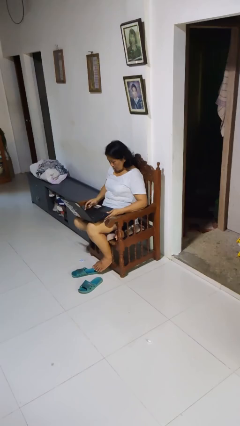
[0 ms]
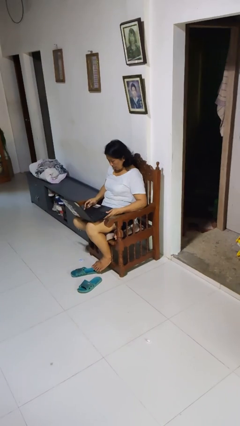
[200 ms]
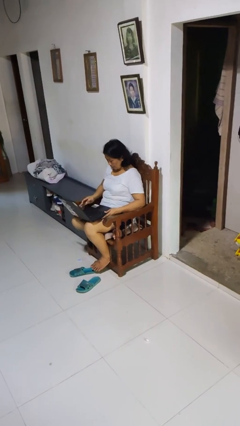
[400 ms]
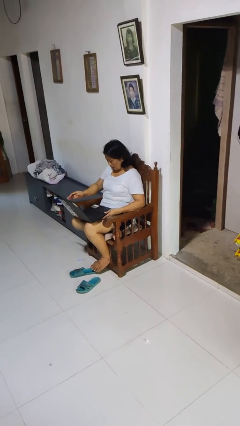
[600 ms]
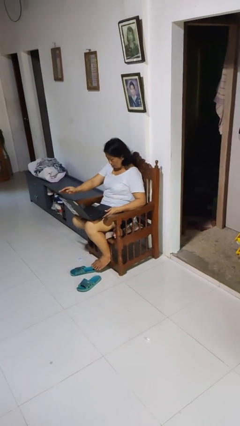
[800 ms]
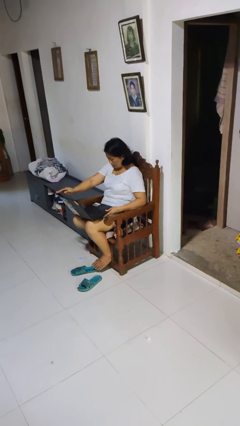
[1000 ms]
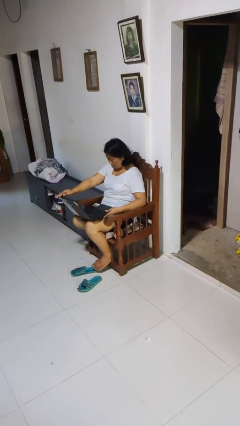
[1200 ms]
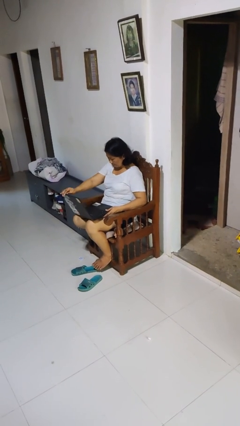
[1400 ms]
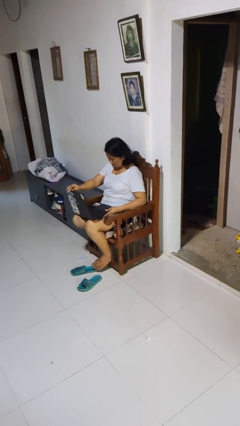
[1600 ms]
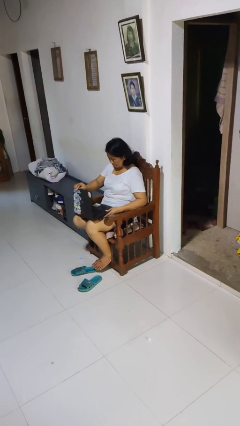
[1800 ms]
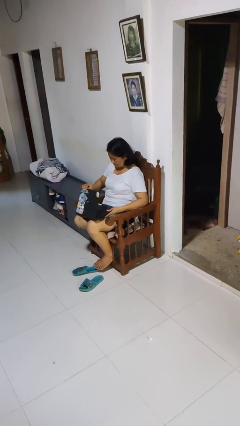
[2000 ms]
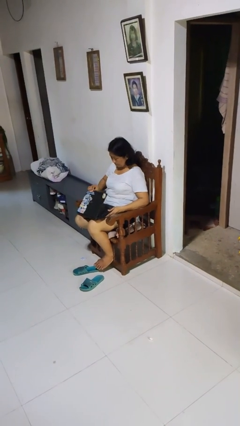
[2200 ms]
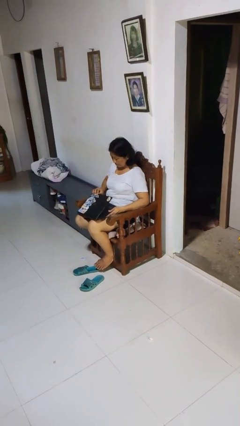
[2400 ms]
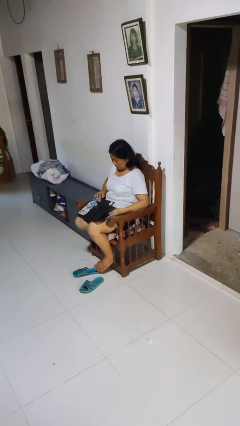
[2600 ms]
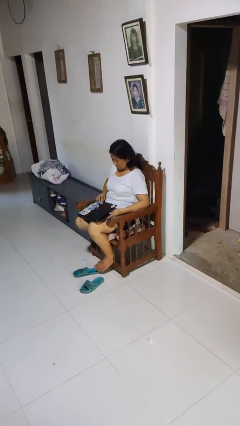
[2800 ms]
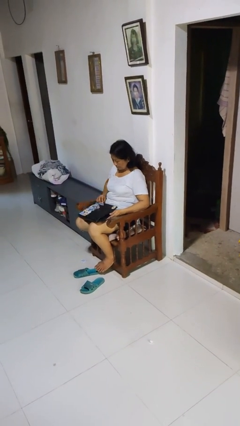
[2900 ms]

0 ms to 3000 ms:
person closes laptop

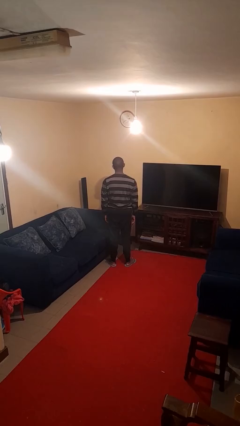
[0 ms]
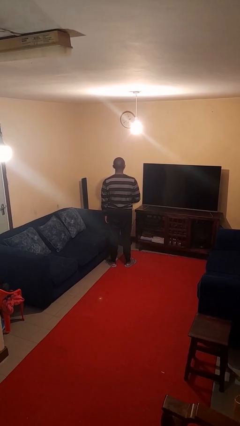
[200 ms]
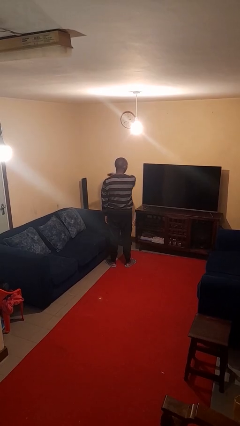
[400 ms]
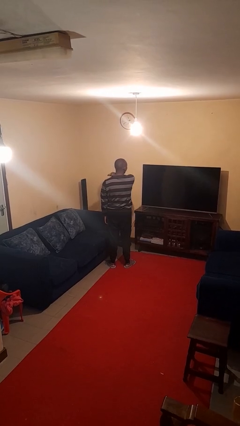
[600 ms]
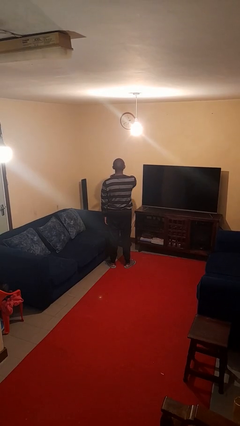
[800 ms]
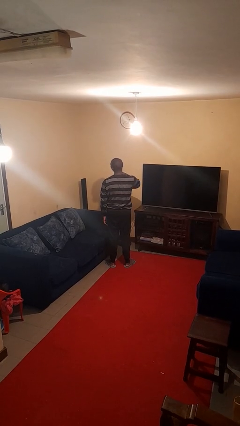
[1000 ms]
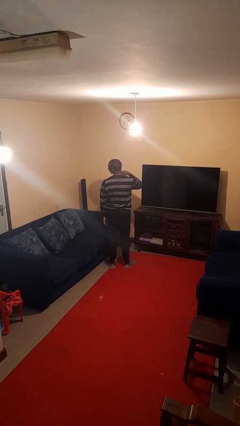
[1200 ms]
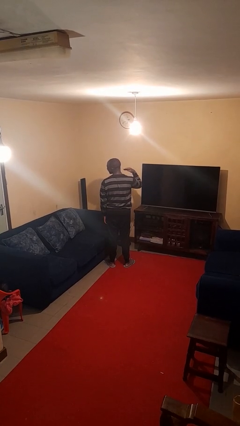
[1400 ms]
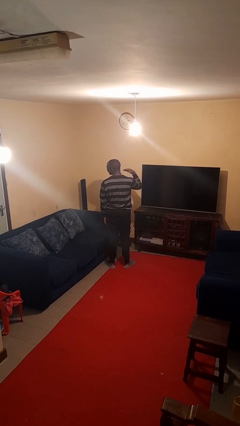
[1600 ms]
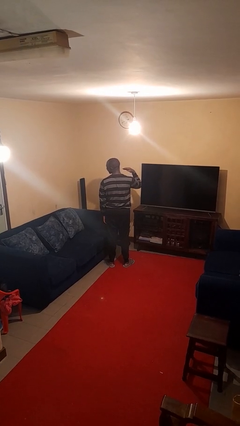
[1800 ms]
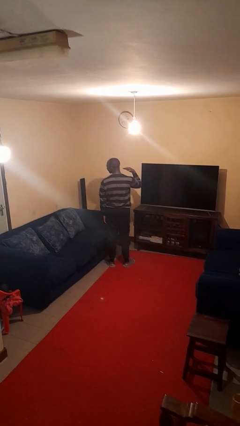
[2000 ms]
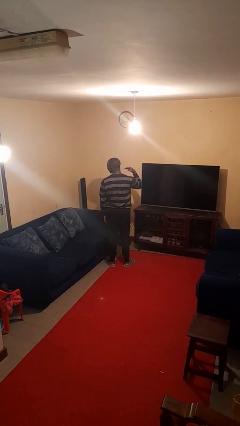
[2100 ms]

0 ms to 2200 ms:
person gestures cut

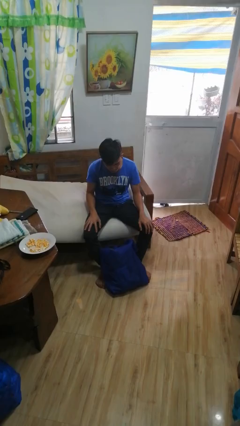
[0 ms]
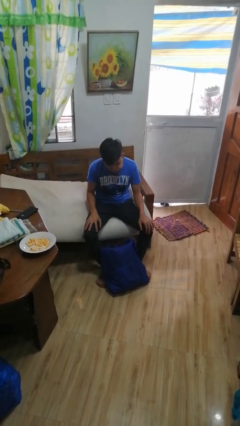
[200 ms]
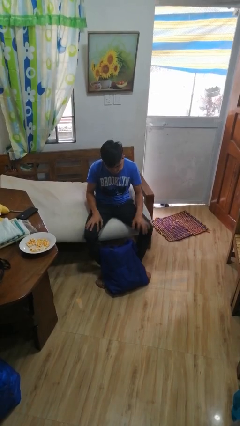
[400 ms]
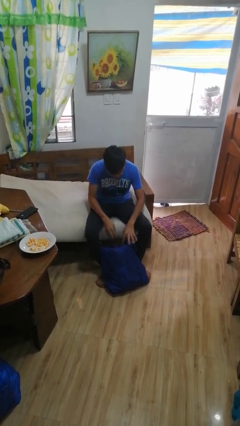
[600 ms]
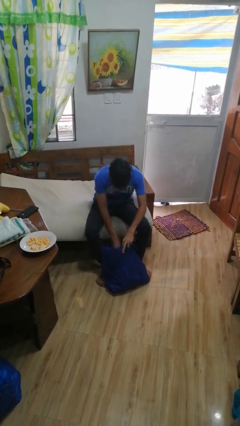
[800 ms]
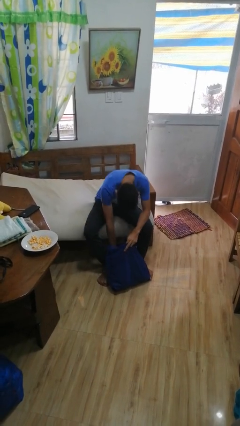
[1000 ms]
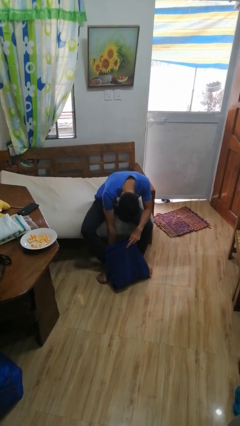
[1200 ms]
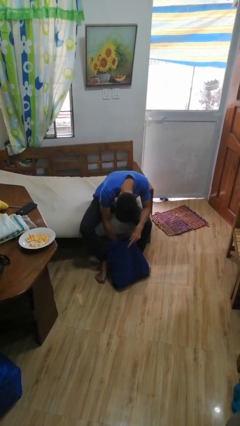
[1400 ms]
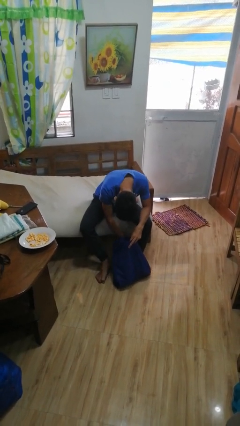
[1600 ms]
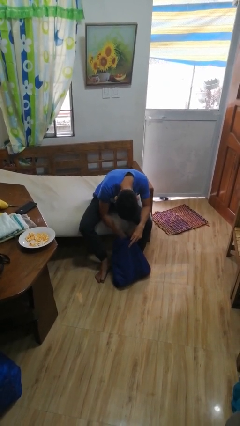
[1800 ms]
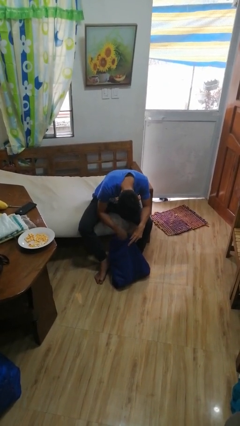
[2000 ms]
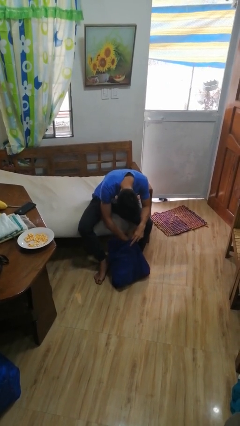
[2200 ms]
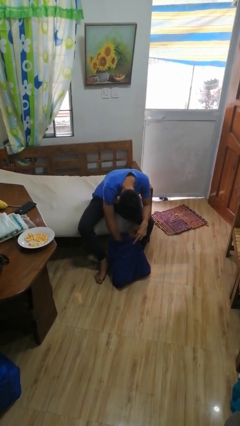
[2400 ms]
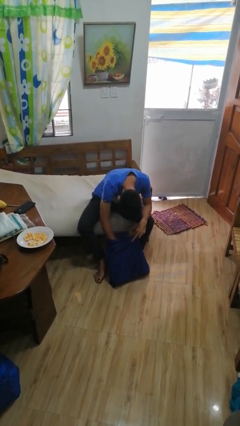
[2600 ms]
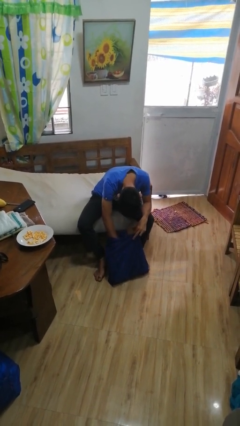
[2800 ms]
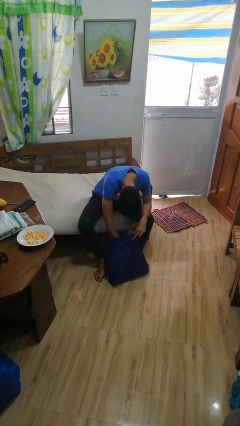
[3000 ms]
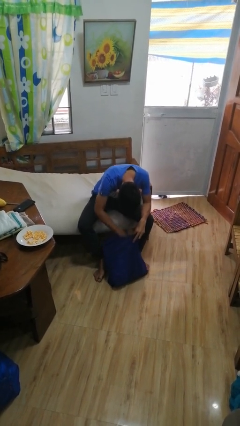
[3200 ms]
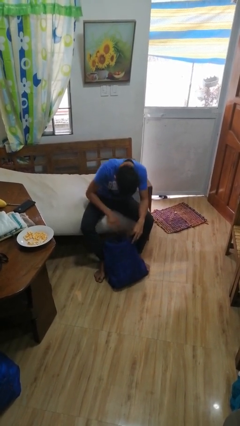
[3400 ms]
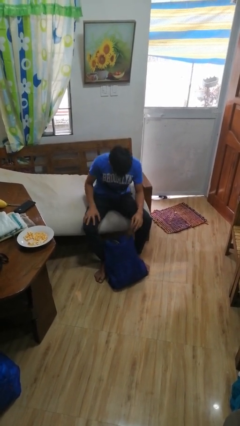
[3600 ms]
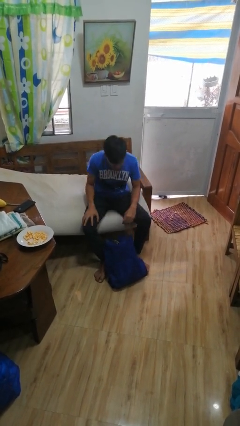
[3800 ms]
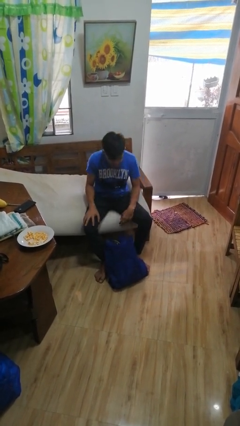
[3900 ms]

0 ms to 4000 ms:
person searches in bag

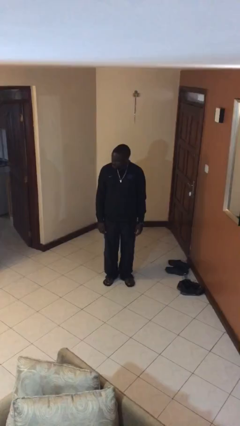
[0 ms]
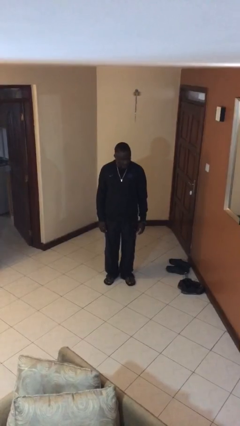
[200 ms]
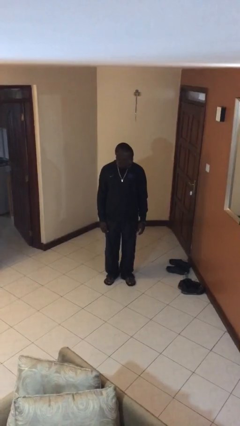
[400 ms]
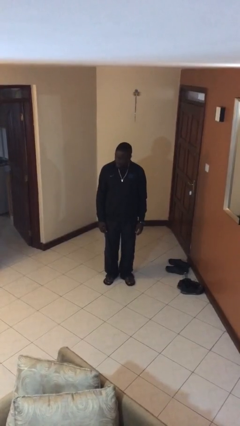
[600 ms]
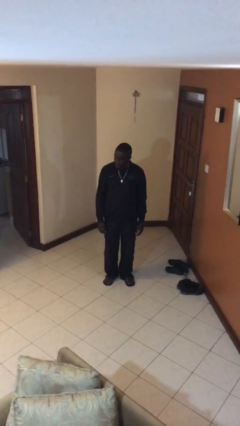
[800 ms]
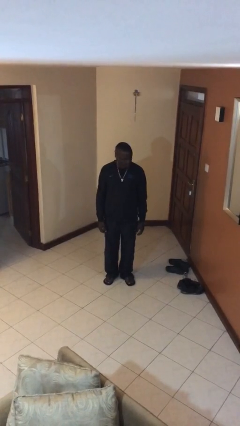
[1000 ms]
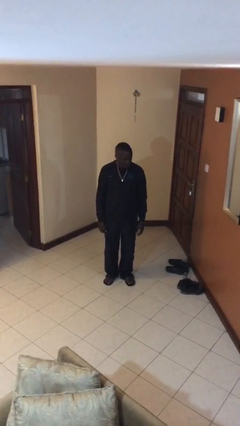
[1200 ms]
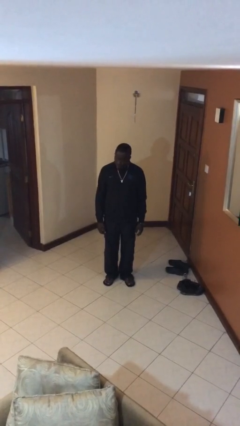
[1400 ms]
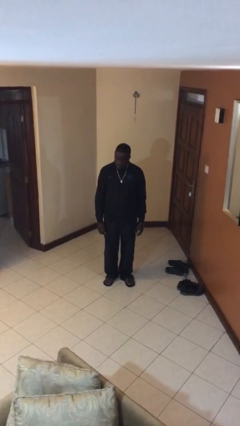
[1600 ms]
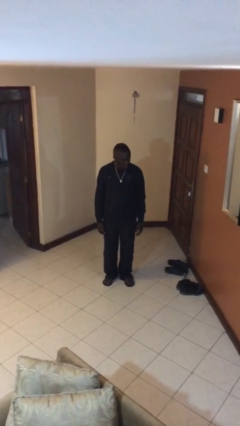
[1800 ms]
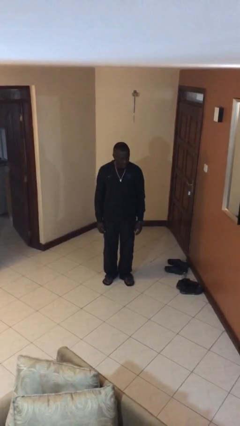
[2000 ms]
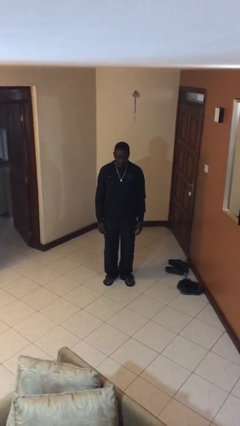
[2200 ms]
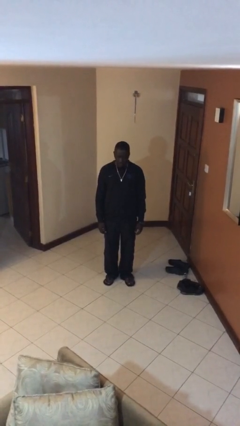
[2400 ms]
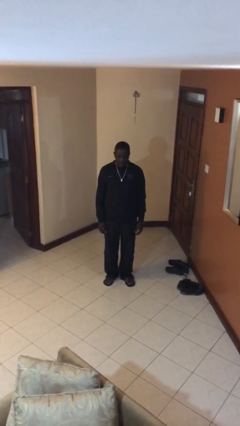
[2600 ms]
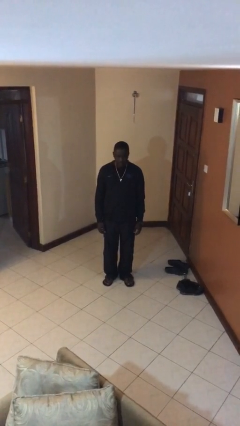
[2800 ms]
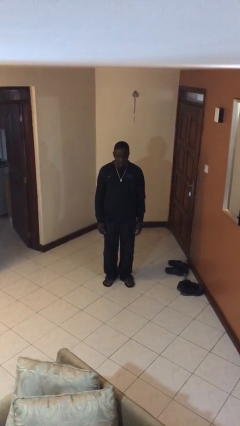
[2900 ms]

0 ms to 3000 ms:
person shakes head

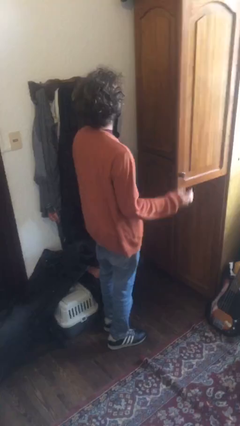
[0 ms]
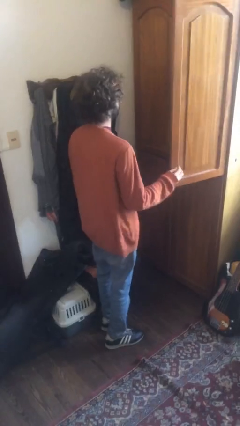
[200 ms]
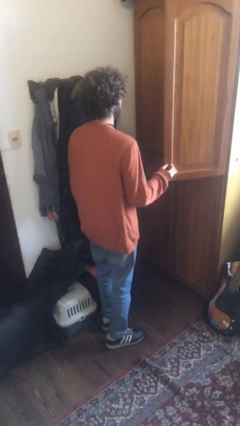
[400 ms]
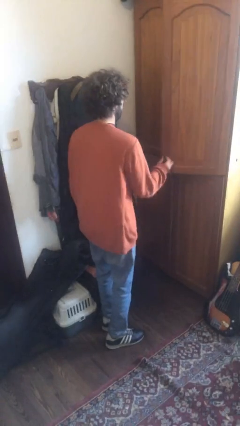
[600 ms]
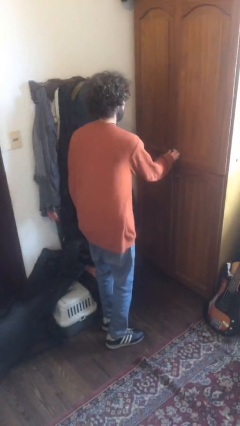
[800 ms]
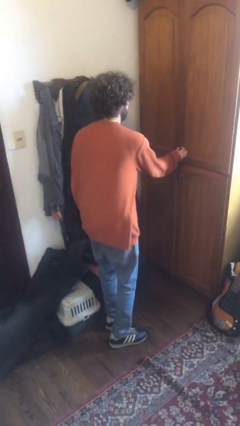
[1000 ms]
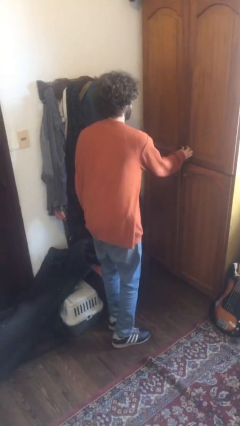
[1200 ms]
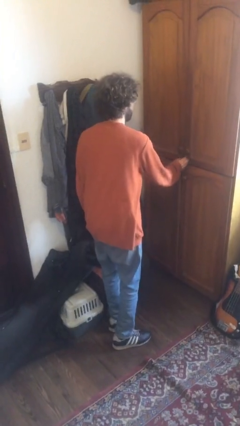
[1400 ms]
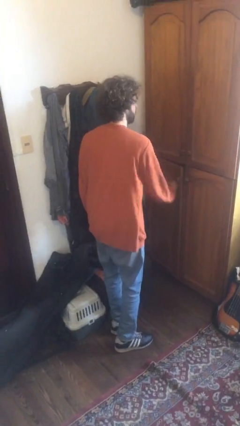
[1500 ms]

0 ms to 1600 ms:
person closes dresser drawer

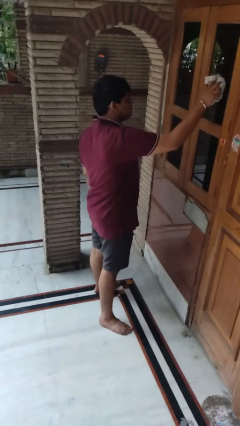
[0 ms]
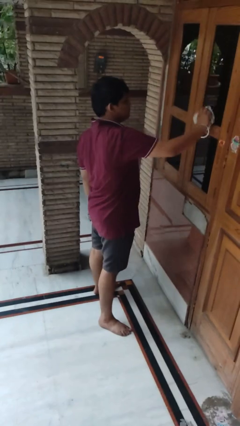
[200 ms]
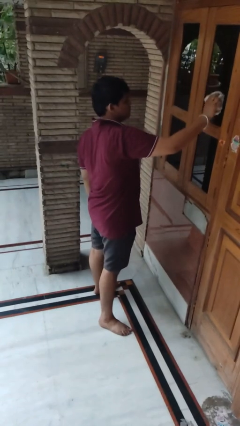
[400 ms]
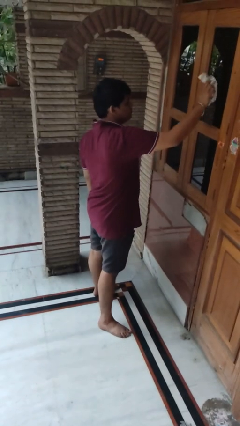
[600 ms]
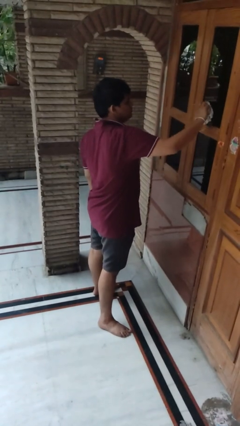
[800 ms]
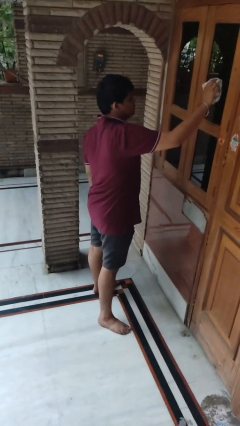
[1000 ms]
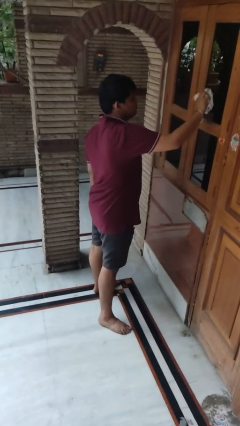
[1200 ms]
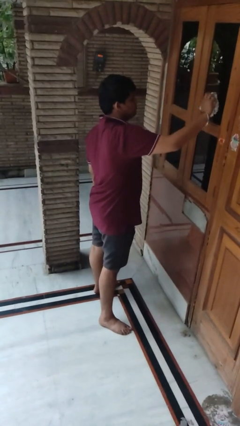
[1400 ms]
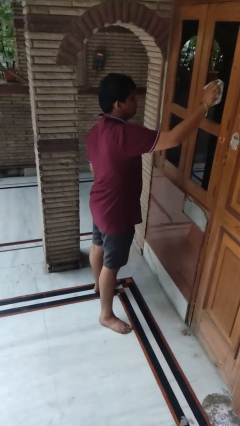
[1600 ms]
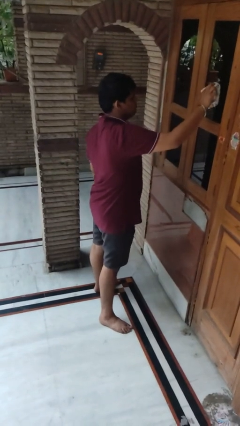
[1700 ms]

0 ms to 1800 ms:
person washes window

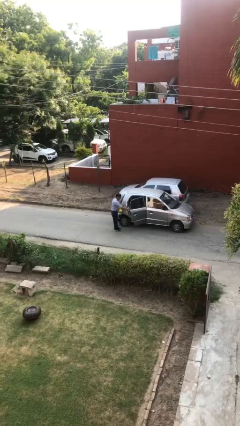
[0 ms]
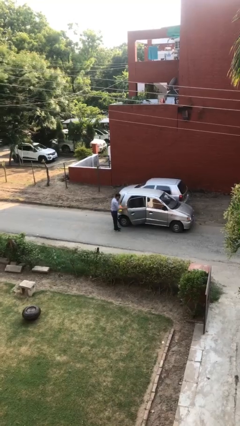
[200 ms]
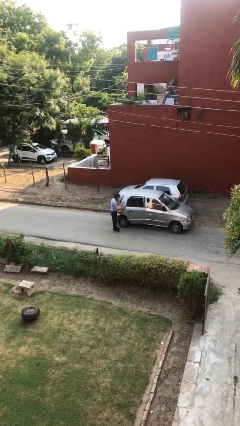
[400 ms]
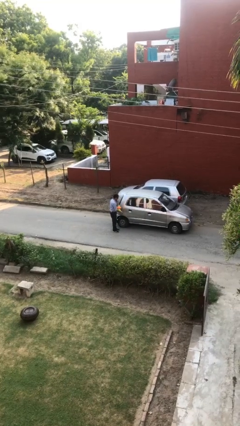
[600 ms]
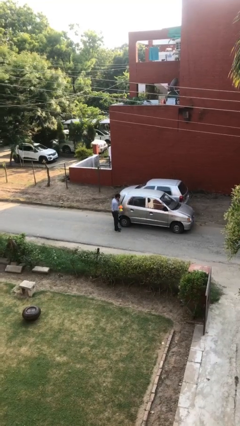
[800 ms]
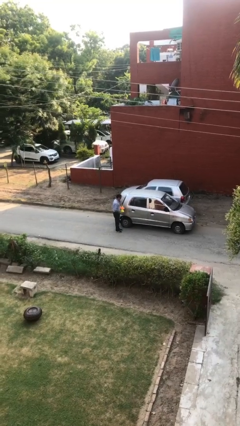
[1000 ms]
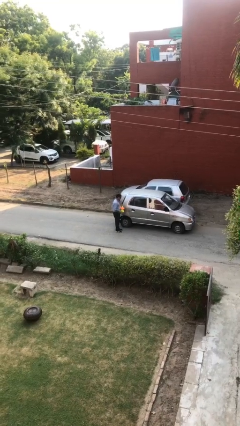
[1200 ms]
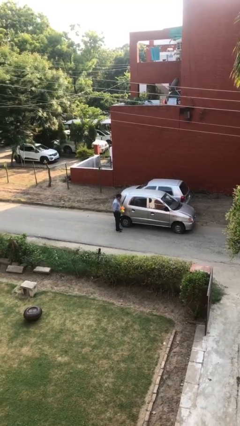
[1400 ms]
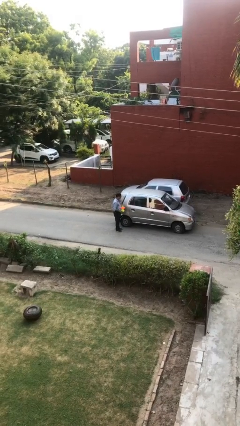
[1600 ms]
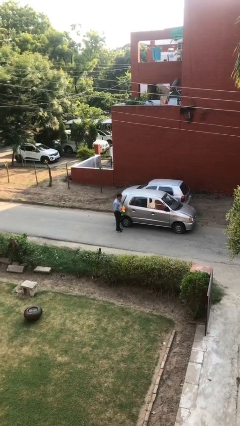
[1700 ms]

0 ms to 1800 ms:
person closes car door
